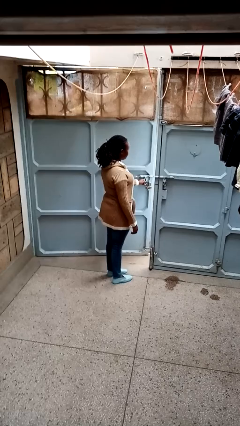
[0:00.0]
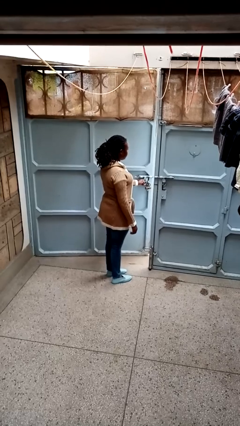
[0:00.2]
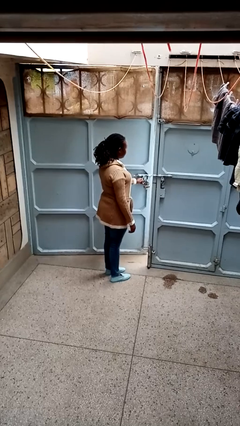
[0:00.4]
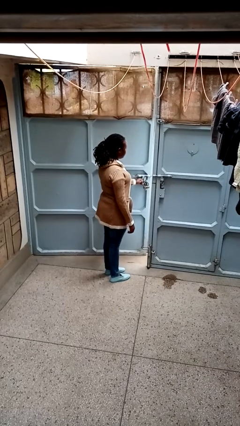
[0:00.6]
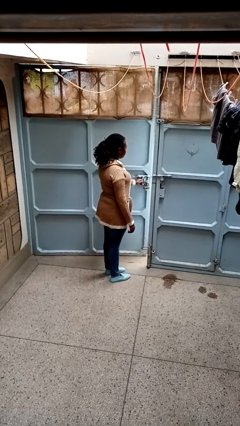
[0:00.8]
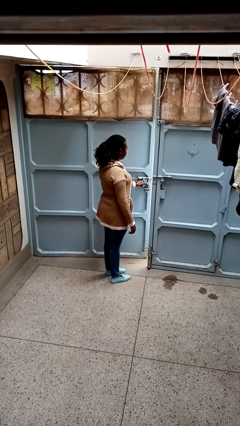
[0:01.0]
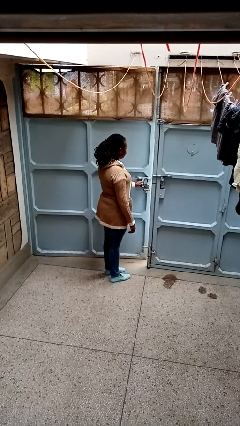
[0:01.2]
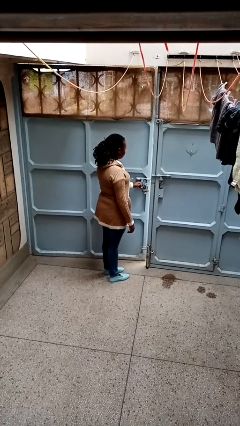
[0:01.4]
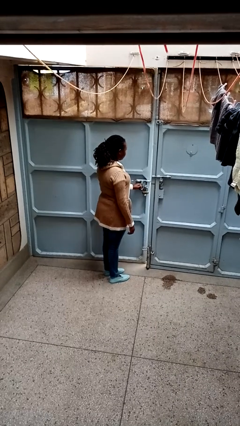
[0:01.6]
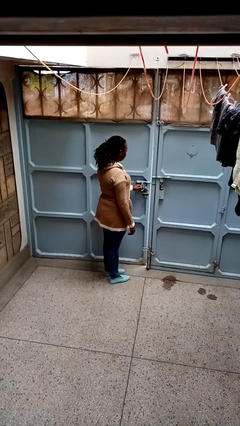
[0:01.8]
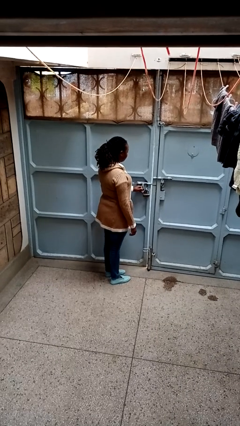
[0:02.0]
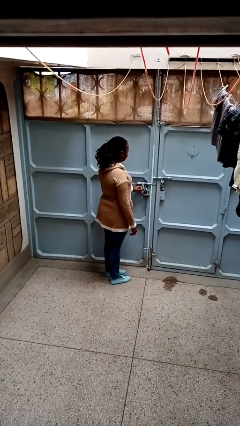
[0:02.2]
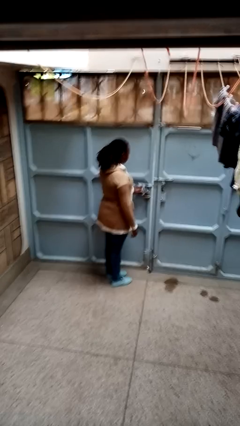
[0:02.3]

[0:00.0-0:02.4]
person closes gate

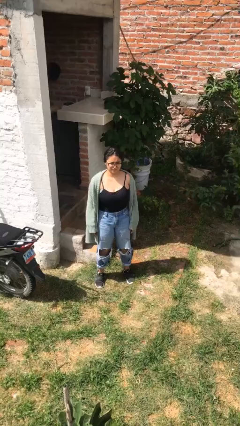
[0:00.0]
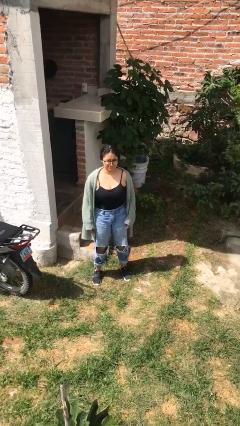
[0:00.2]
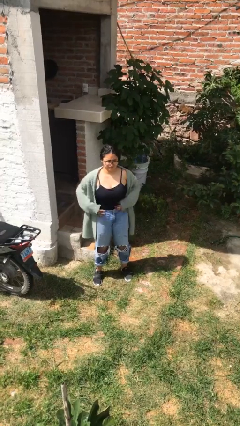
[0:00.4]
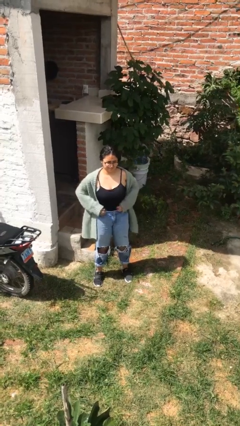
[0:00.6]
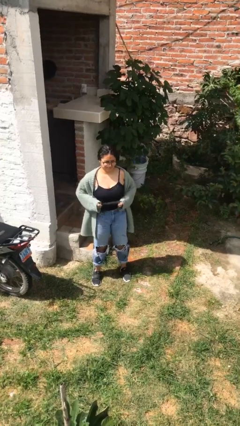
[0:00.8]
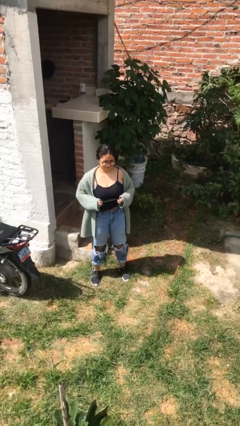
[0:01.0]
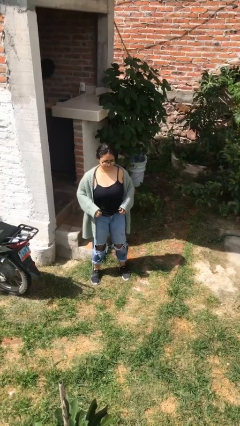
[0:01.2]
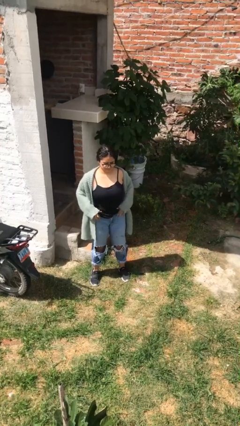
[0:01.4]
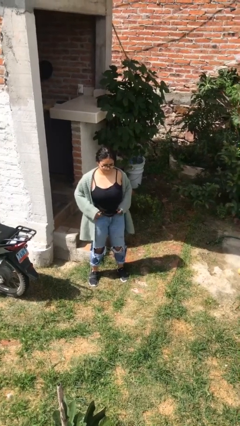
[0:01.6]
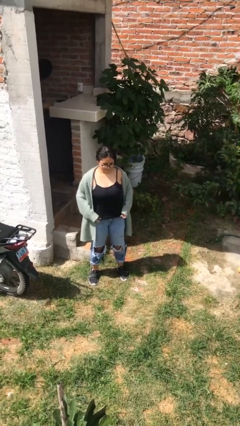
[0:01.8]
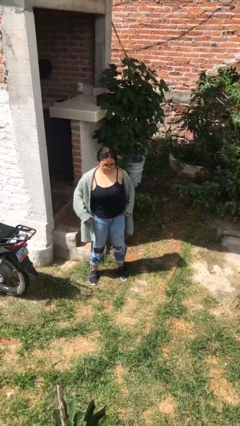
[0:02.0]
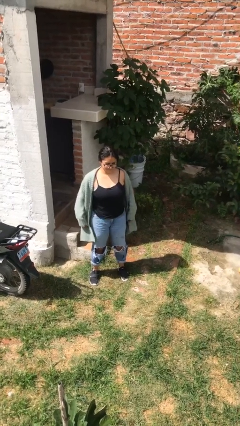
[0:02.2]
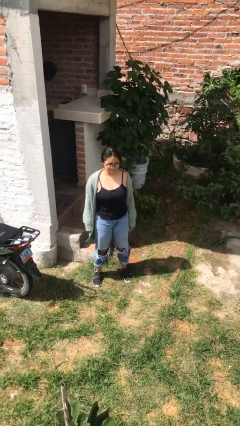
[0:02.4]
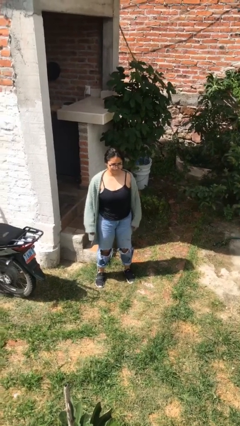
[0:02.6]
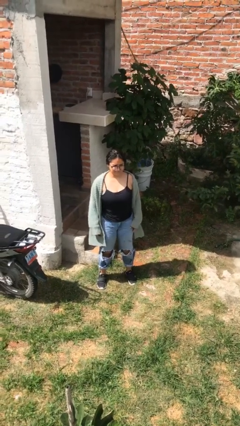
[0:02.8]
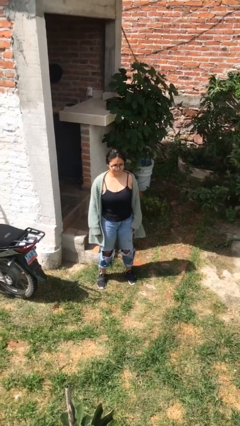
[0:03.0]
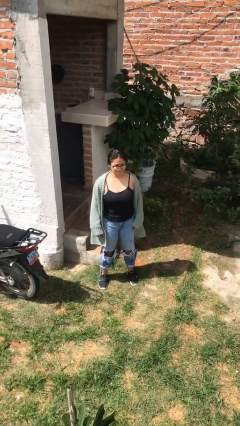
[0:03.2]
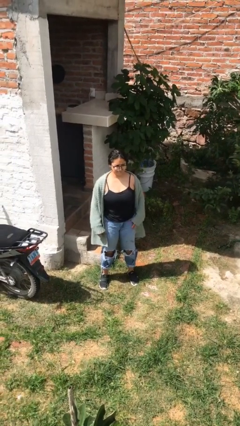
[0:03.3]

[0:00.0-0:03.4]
person untucks shirt

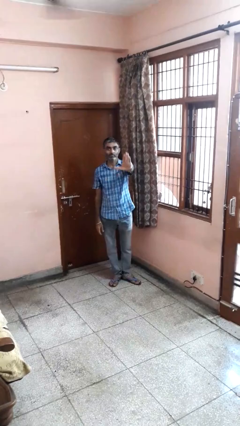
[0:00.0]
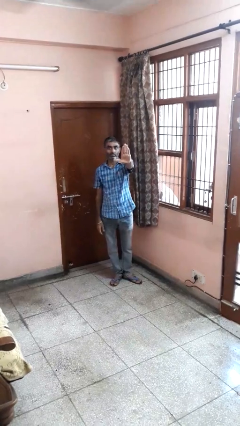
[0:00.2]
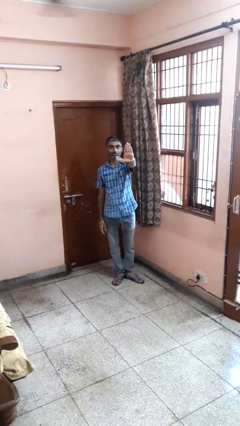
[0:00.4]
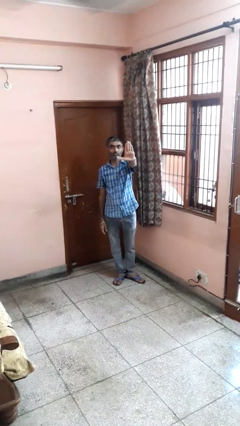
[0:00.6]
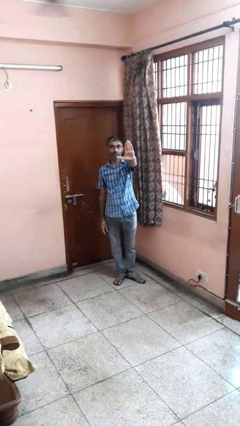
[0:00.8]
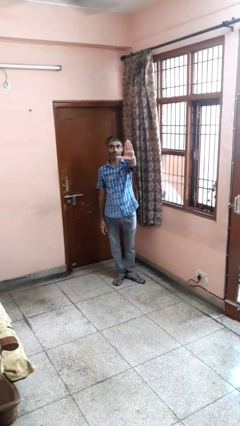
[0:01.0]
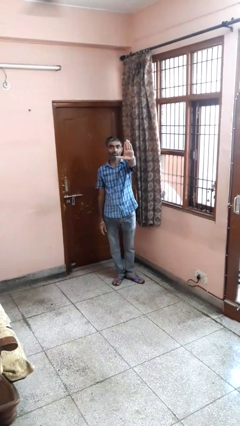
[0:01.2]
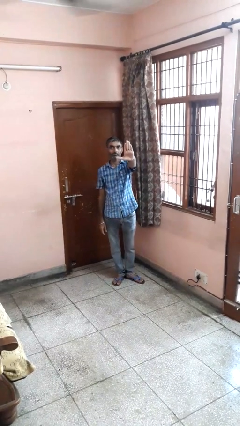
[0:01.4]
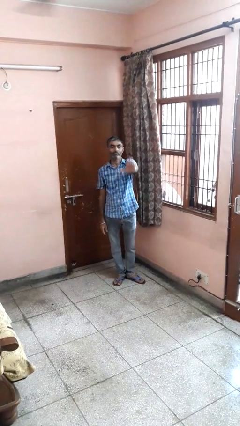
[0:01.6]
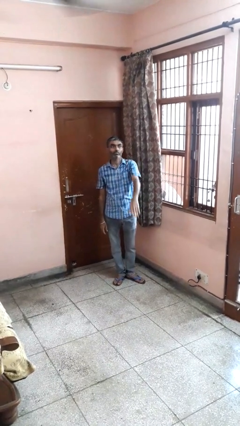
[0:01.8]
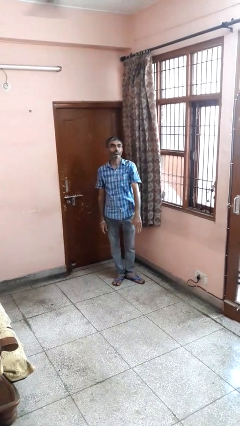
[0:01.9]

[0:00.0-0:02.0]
person gestures stop

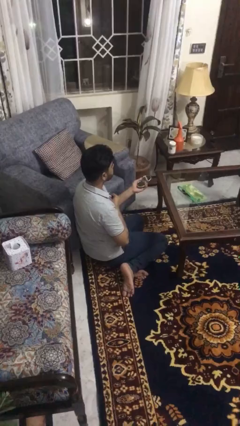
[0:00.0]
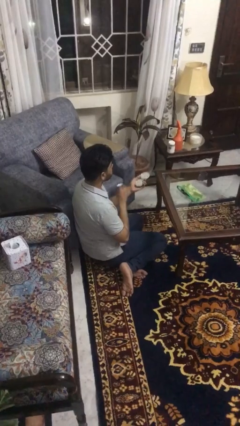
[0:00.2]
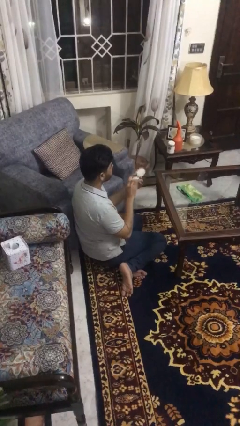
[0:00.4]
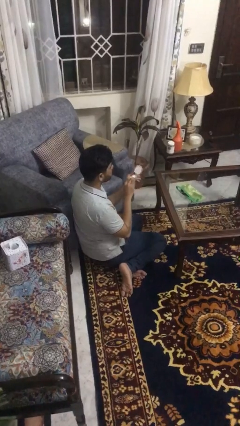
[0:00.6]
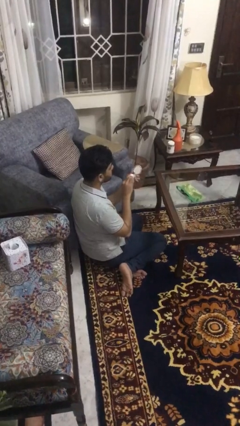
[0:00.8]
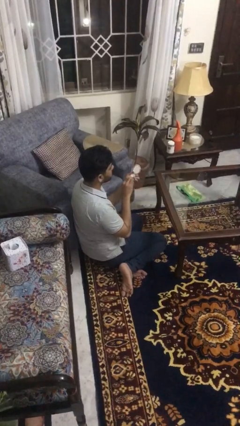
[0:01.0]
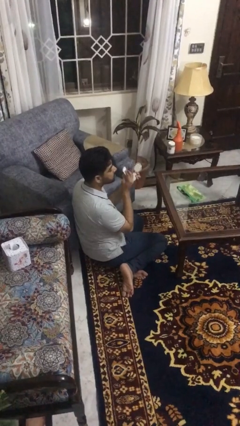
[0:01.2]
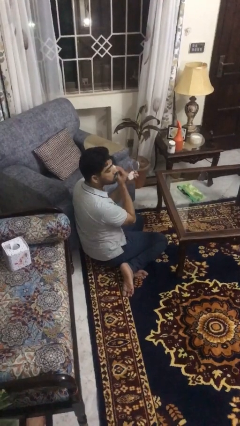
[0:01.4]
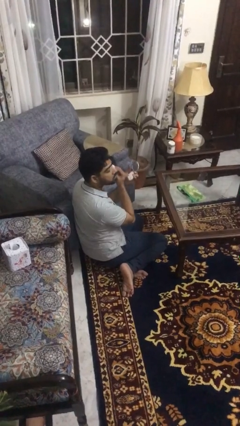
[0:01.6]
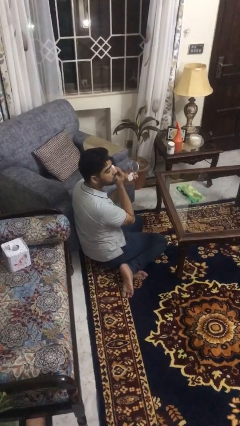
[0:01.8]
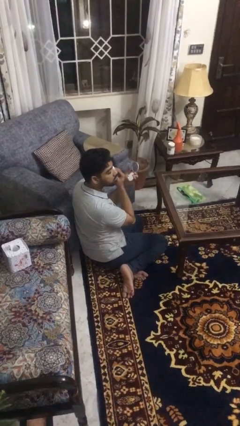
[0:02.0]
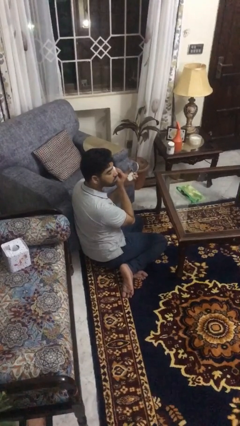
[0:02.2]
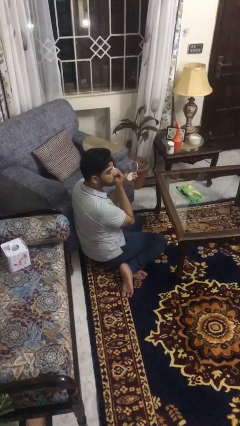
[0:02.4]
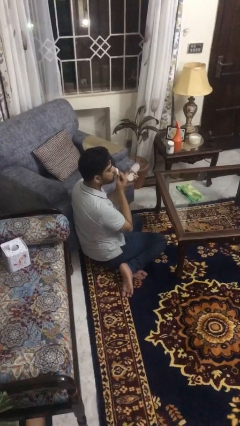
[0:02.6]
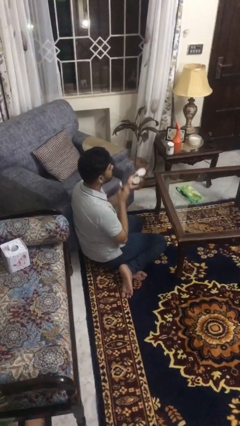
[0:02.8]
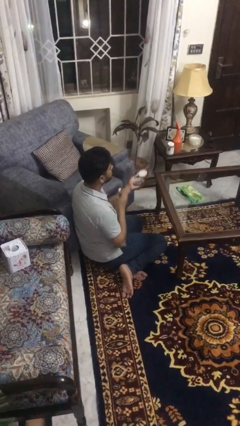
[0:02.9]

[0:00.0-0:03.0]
person applies foundation makeup

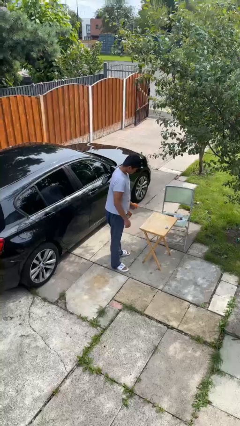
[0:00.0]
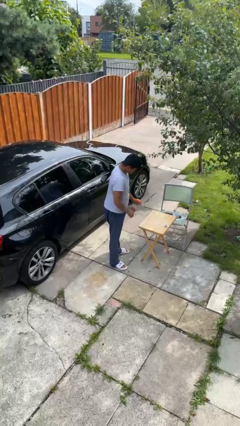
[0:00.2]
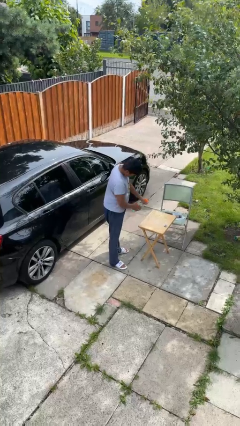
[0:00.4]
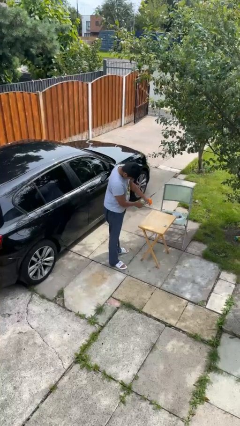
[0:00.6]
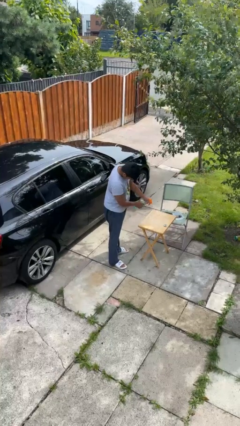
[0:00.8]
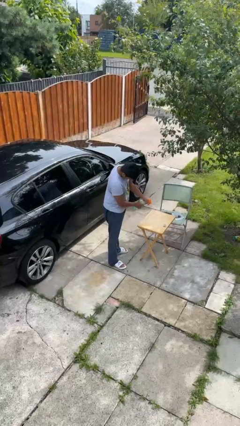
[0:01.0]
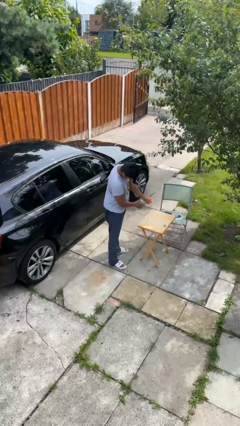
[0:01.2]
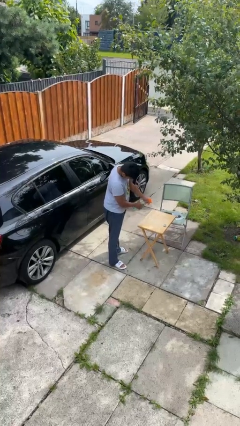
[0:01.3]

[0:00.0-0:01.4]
person sprays from bottle

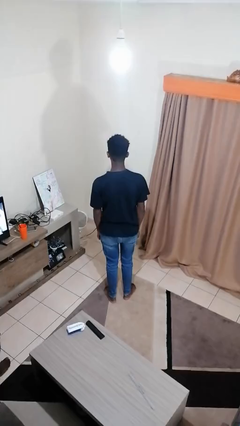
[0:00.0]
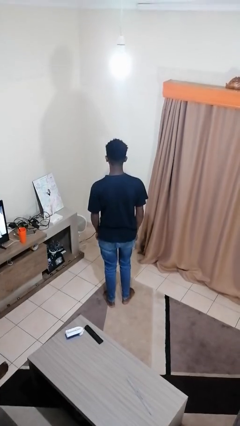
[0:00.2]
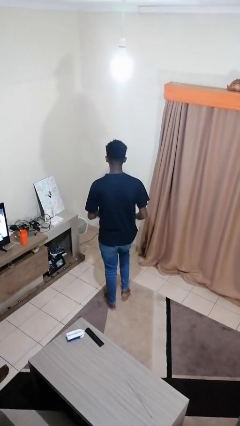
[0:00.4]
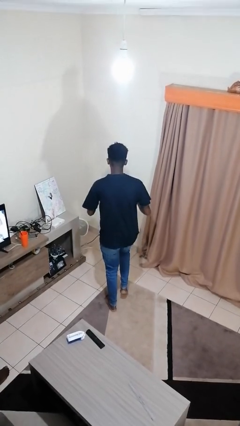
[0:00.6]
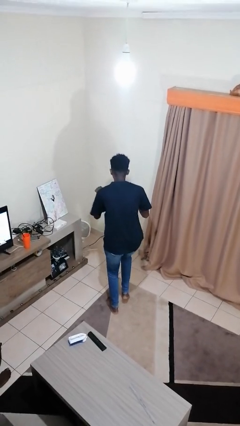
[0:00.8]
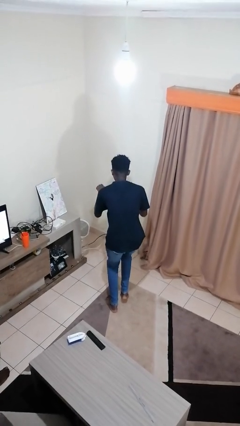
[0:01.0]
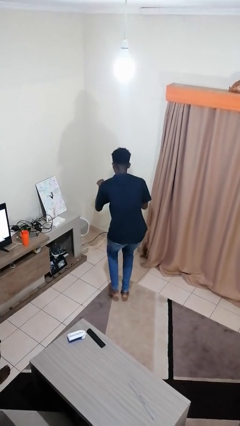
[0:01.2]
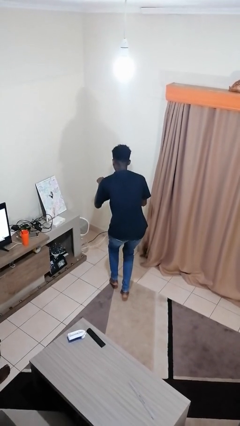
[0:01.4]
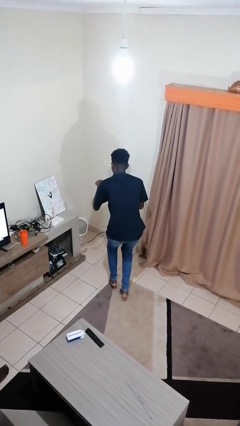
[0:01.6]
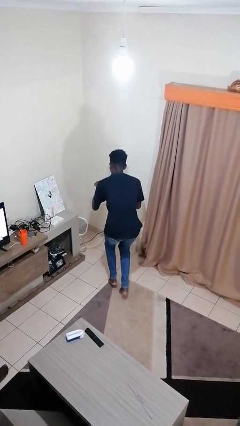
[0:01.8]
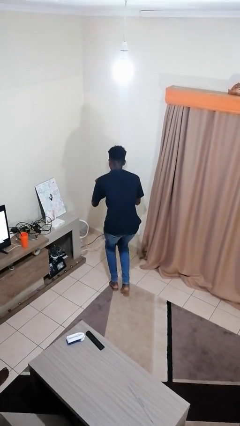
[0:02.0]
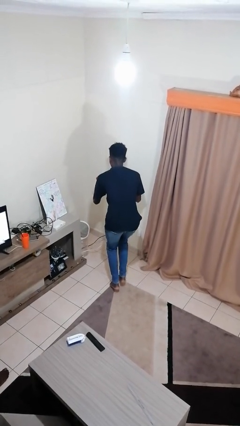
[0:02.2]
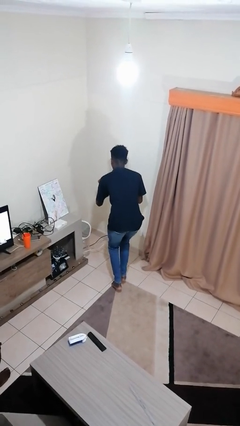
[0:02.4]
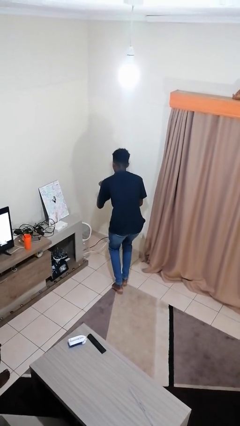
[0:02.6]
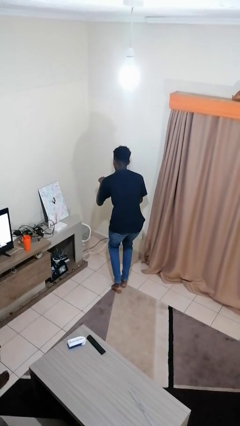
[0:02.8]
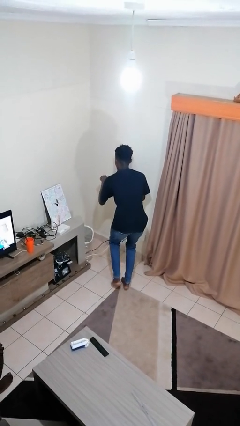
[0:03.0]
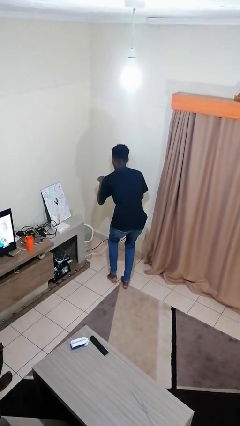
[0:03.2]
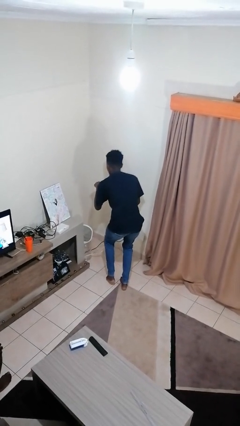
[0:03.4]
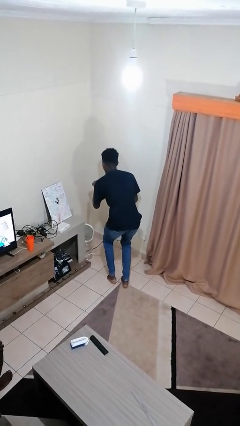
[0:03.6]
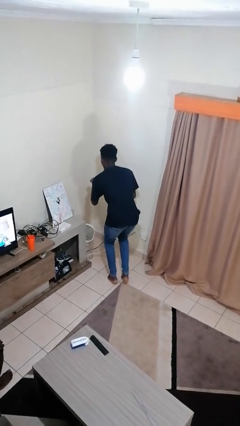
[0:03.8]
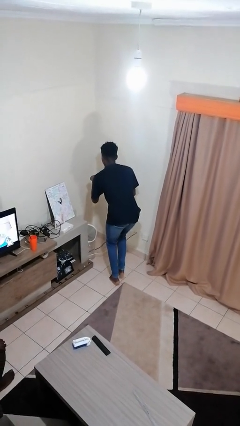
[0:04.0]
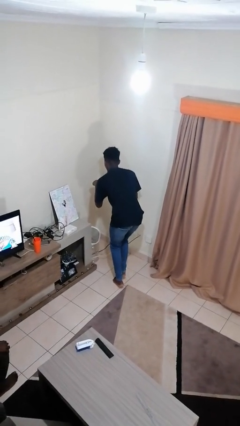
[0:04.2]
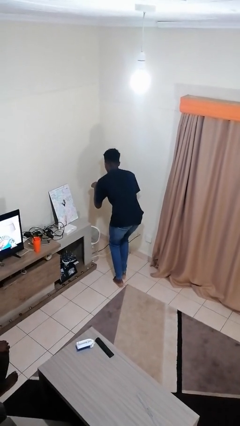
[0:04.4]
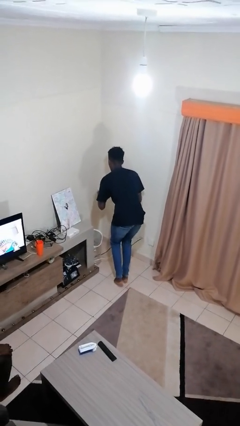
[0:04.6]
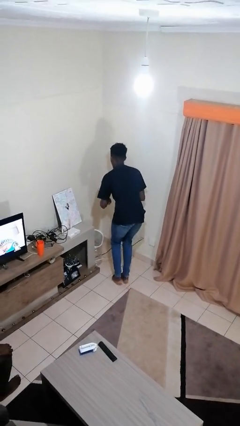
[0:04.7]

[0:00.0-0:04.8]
person walks tiptoe
